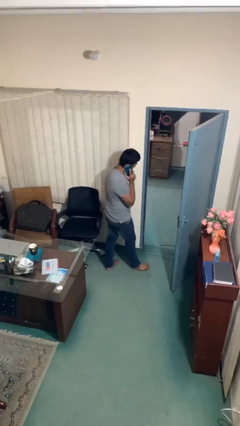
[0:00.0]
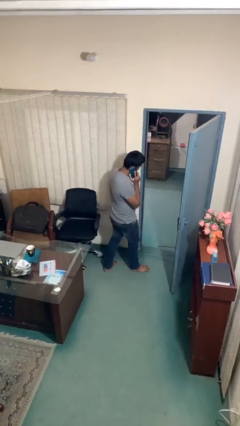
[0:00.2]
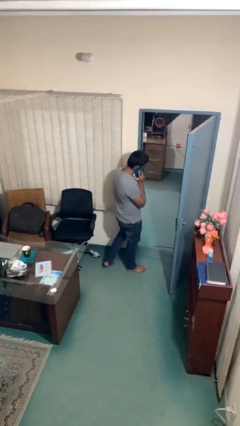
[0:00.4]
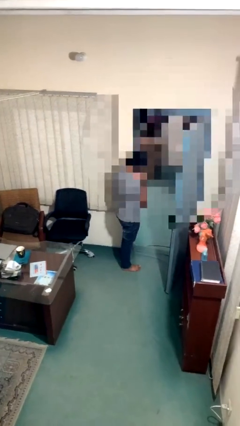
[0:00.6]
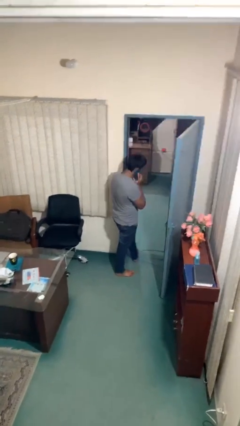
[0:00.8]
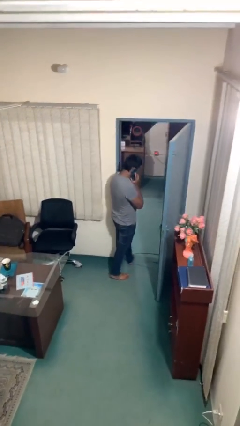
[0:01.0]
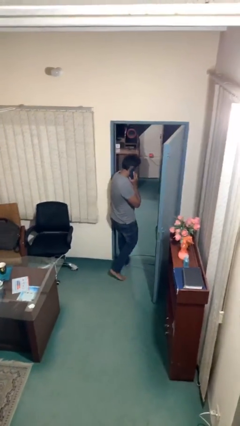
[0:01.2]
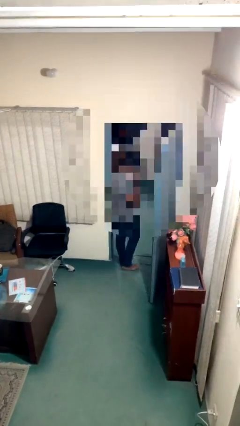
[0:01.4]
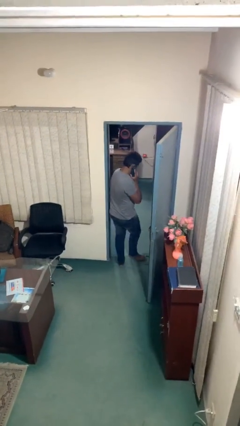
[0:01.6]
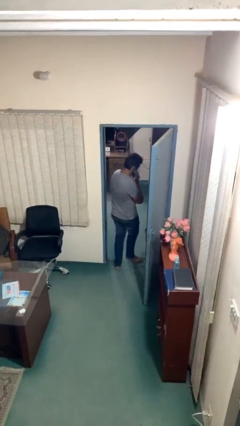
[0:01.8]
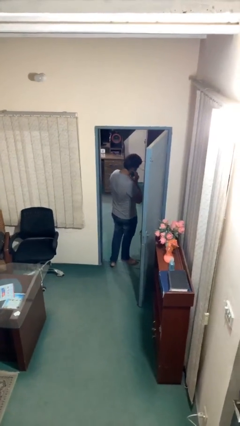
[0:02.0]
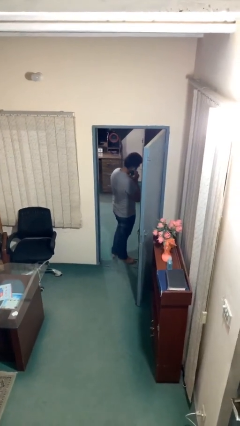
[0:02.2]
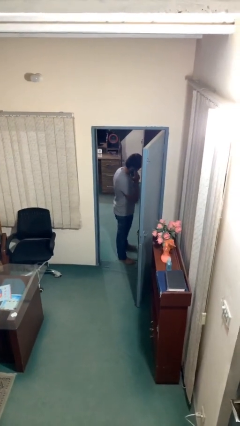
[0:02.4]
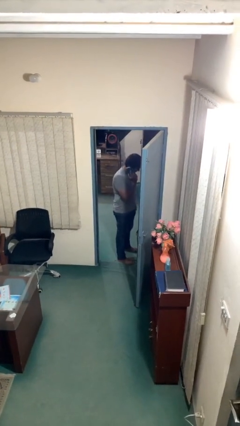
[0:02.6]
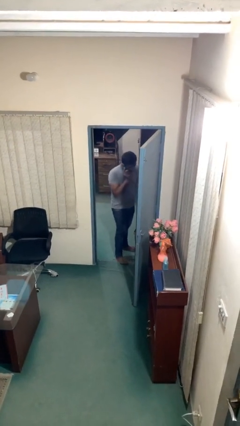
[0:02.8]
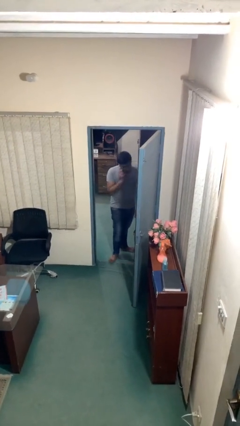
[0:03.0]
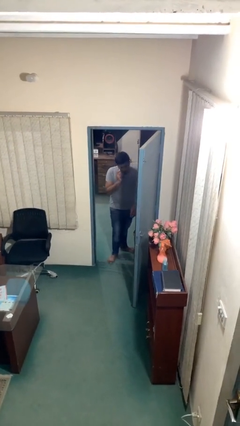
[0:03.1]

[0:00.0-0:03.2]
person exits scene through structure

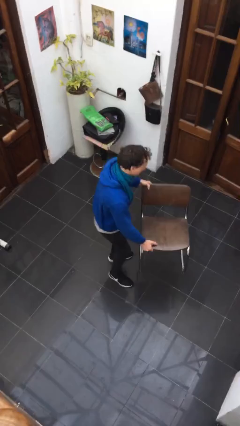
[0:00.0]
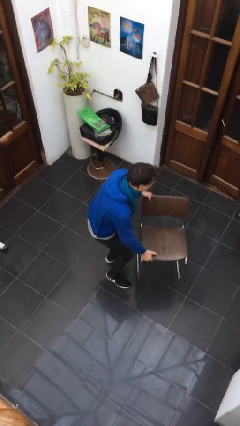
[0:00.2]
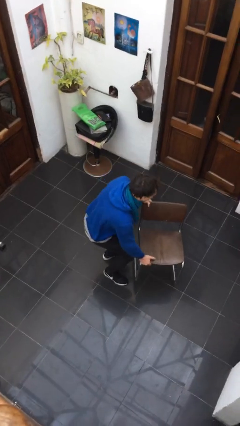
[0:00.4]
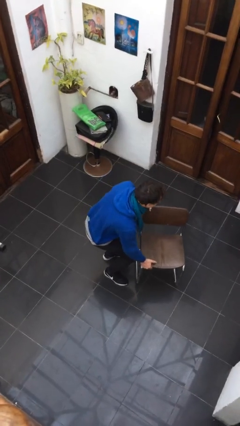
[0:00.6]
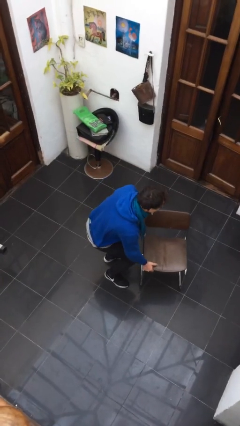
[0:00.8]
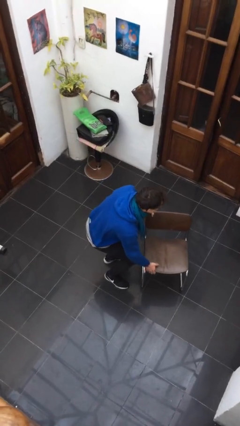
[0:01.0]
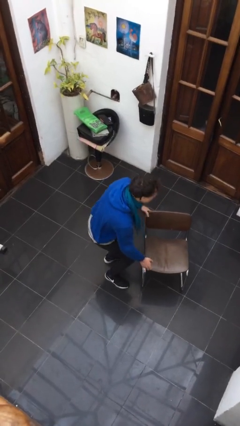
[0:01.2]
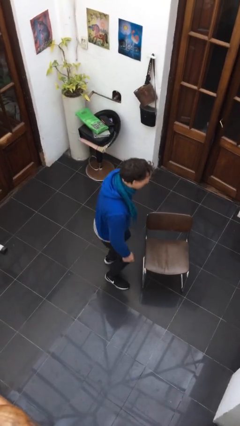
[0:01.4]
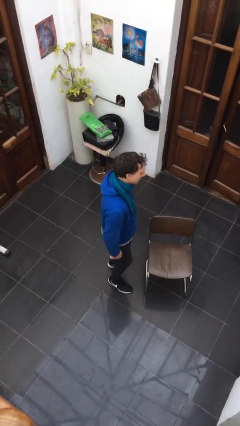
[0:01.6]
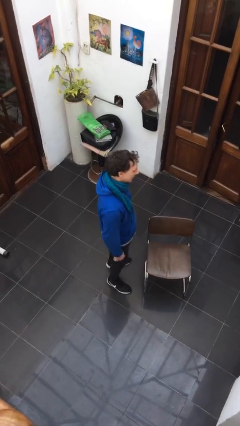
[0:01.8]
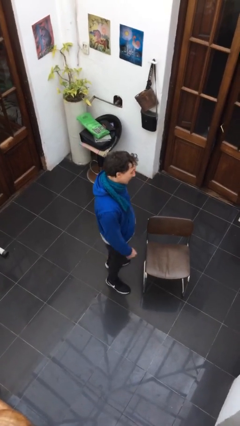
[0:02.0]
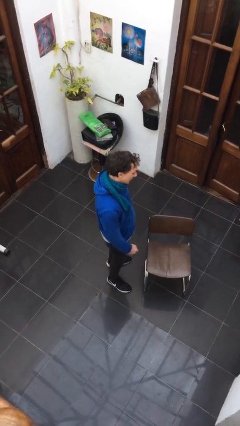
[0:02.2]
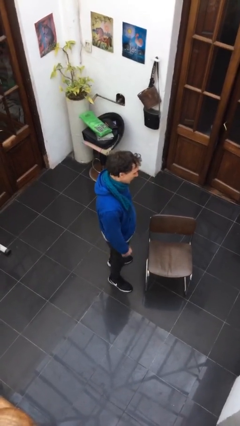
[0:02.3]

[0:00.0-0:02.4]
person puts down object on floor

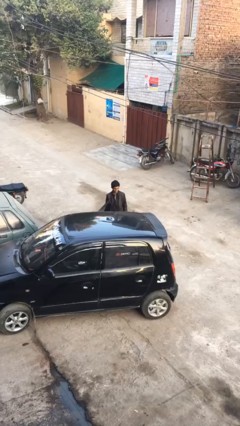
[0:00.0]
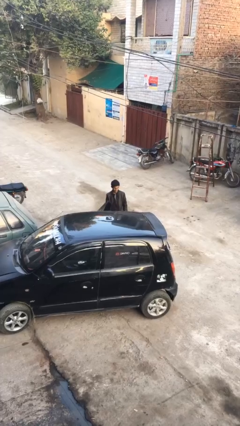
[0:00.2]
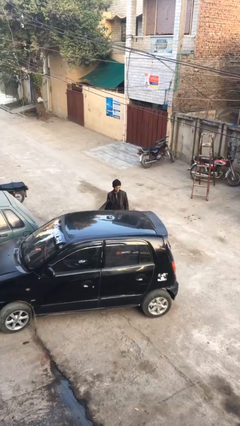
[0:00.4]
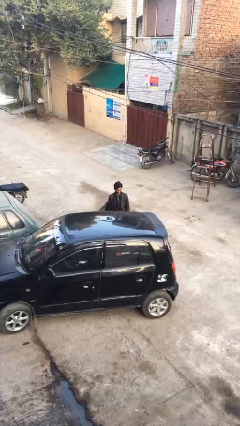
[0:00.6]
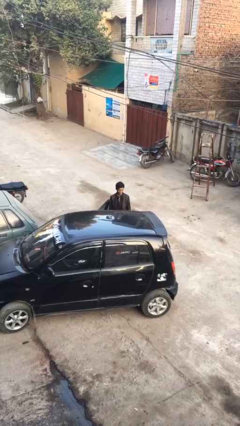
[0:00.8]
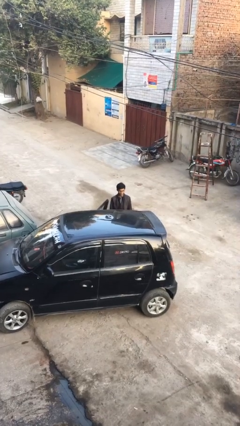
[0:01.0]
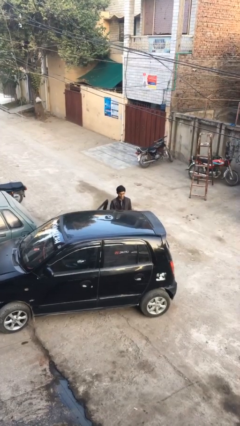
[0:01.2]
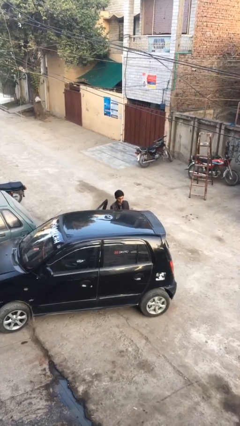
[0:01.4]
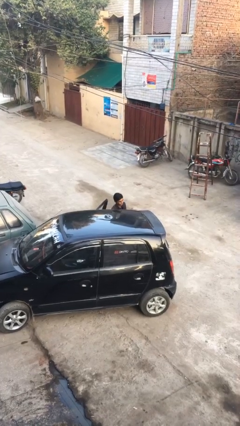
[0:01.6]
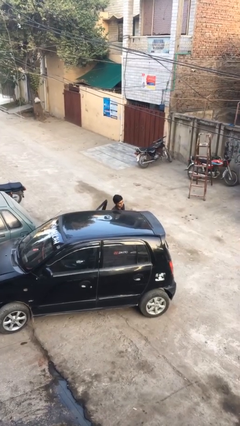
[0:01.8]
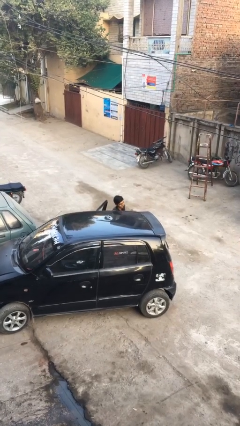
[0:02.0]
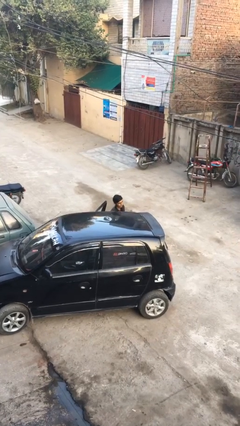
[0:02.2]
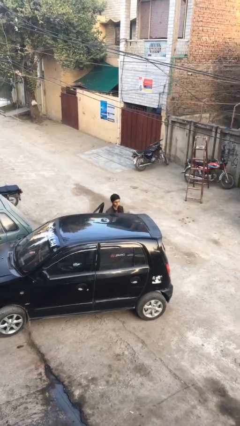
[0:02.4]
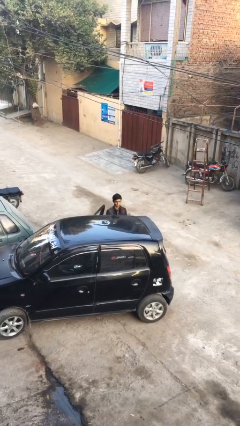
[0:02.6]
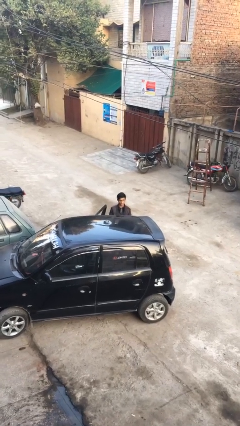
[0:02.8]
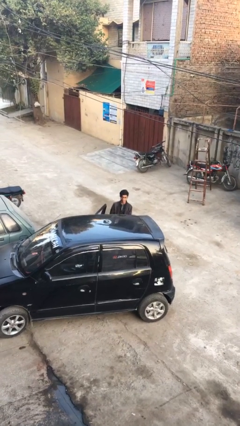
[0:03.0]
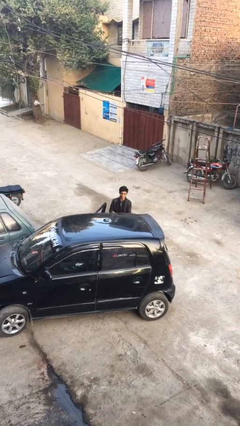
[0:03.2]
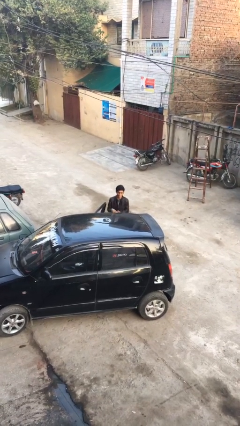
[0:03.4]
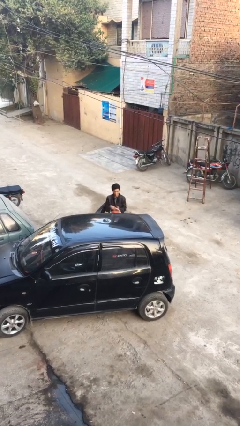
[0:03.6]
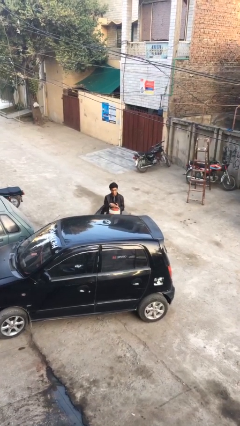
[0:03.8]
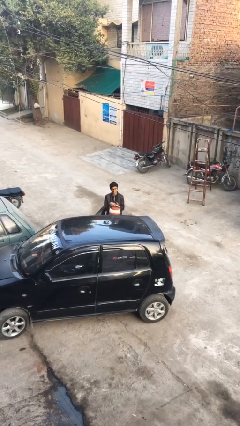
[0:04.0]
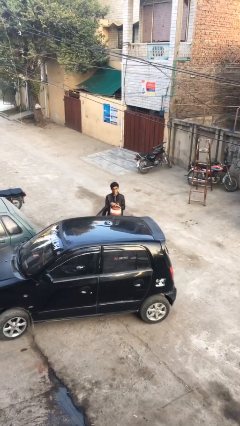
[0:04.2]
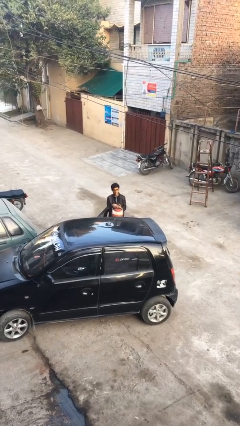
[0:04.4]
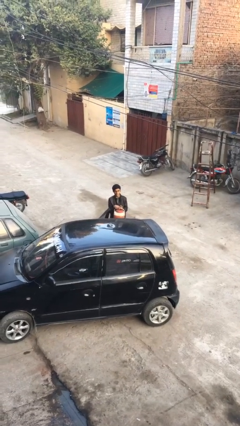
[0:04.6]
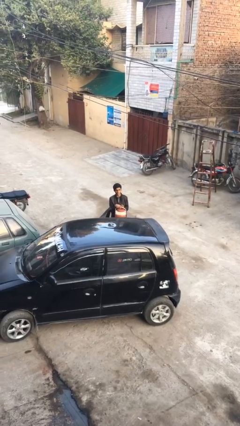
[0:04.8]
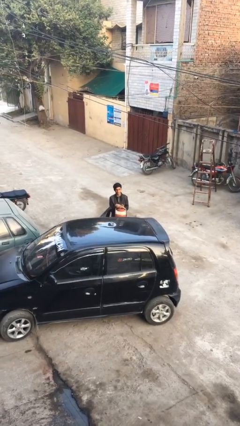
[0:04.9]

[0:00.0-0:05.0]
person unloads car

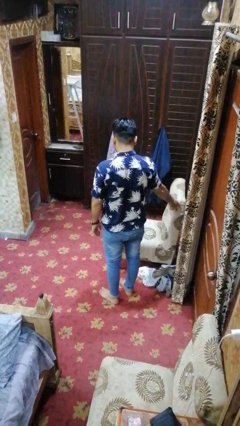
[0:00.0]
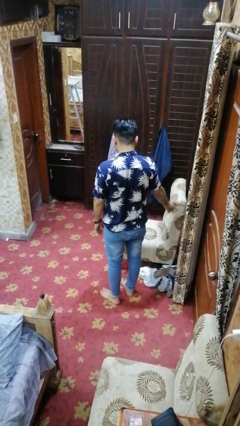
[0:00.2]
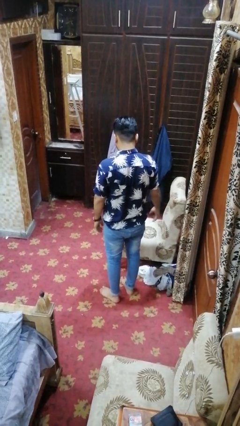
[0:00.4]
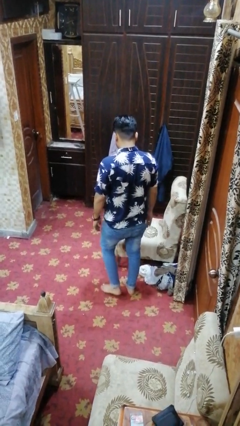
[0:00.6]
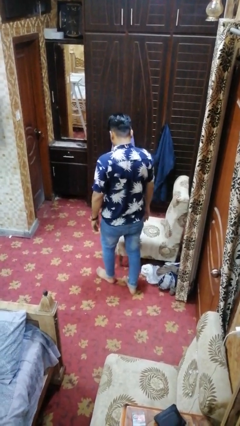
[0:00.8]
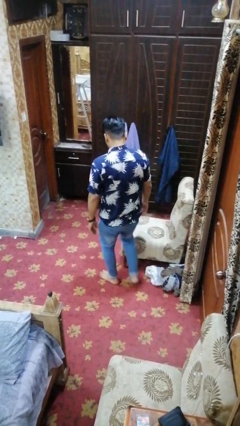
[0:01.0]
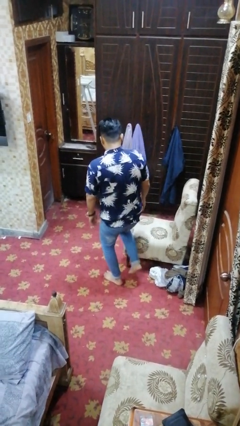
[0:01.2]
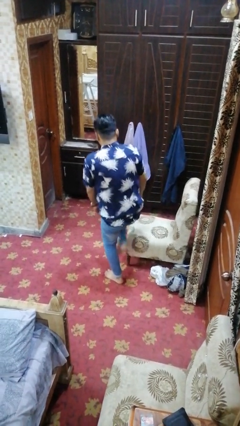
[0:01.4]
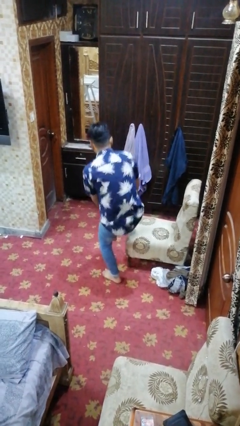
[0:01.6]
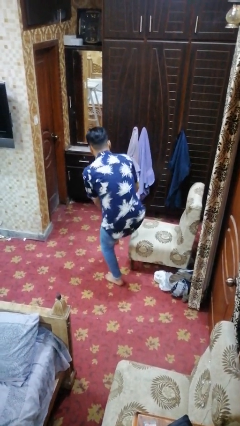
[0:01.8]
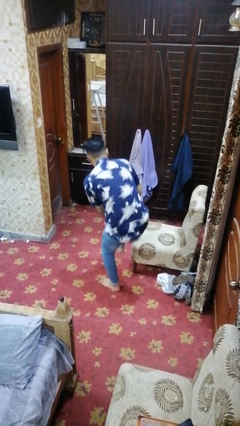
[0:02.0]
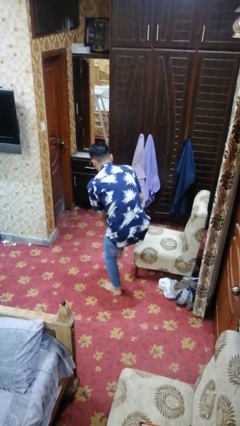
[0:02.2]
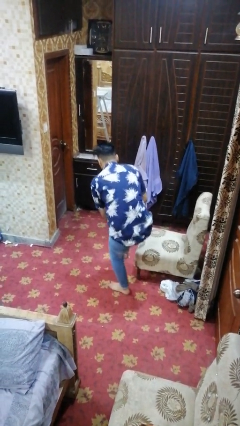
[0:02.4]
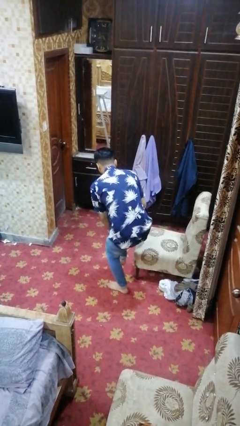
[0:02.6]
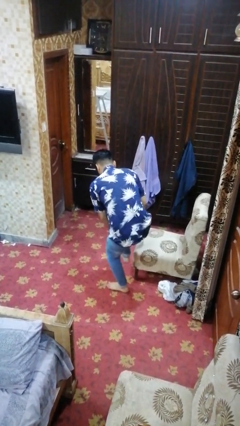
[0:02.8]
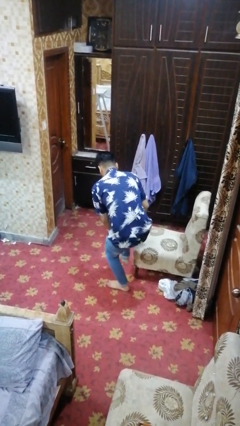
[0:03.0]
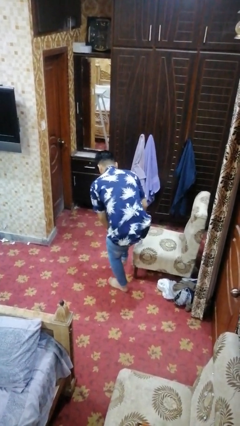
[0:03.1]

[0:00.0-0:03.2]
person trips on object on floor

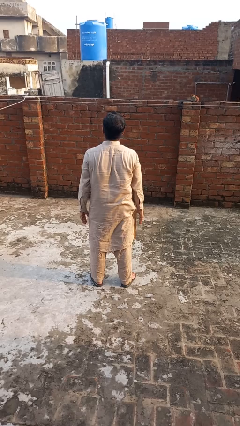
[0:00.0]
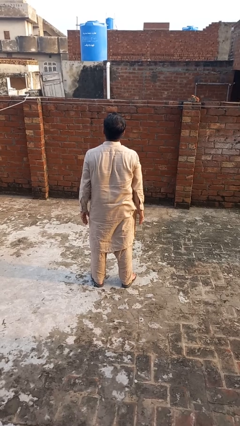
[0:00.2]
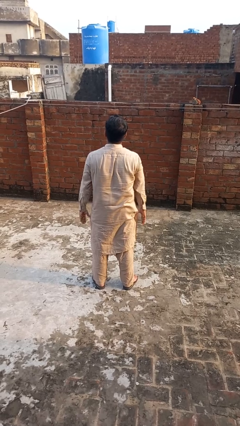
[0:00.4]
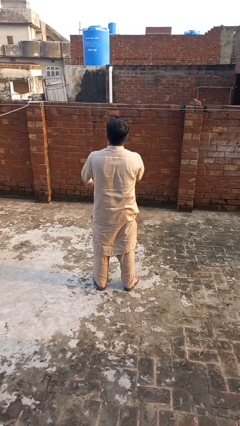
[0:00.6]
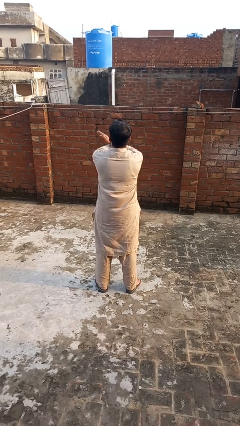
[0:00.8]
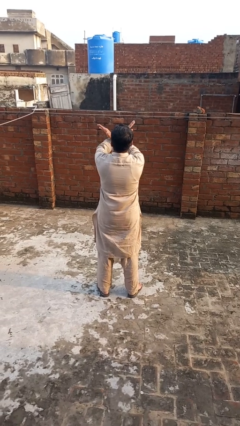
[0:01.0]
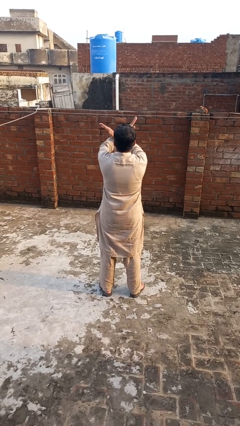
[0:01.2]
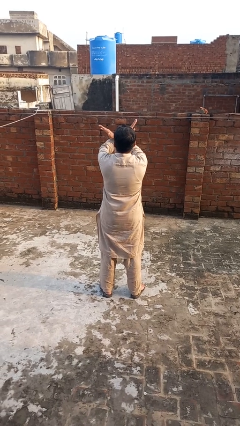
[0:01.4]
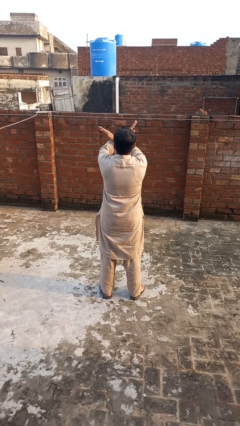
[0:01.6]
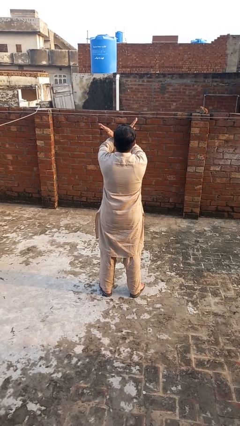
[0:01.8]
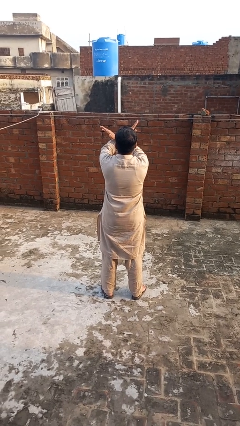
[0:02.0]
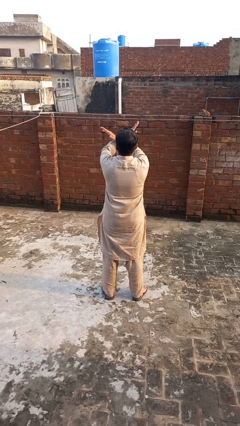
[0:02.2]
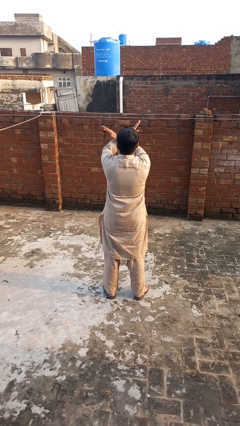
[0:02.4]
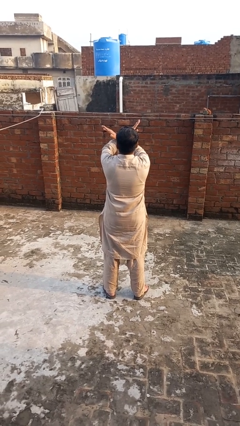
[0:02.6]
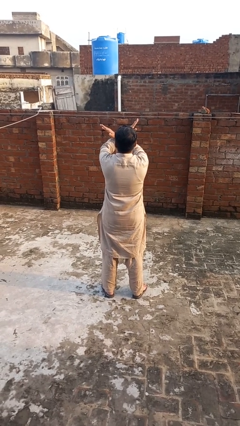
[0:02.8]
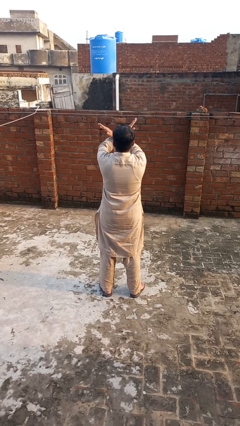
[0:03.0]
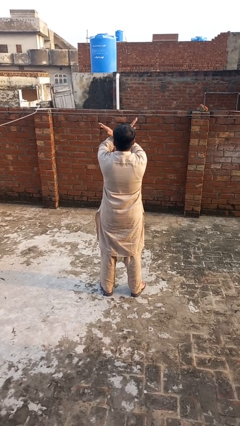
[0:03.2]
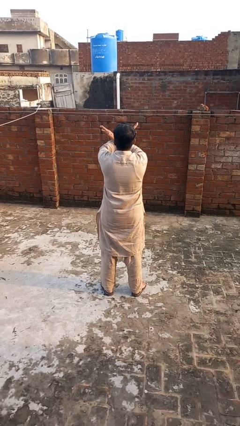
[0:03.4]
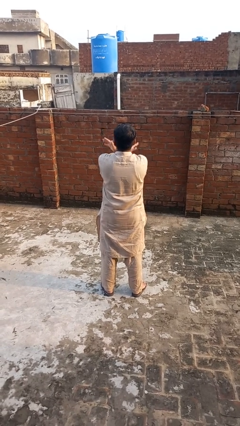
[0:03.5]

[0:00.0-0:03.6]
person gestures arms x
